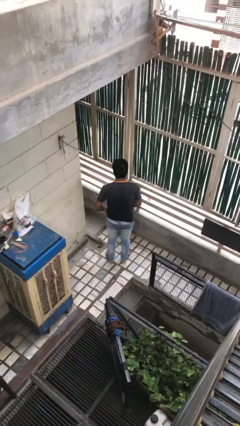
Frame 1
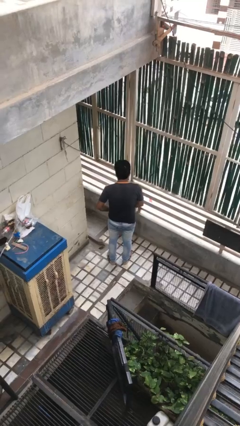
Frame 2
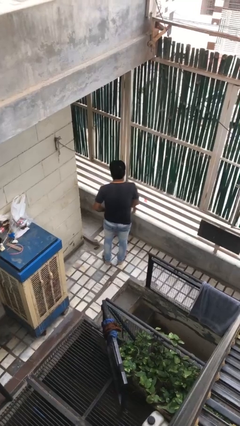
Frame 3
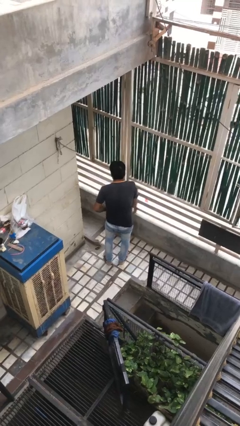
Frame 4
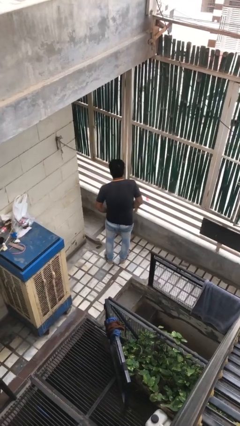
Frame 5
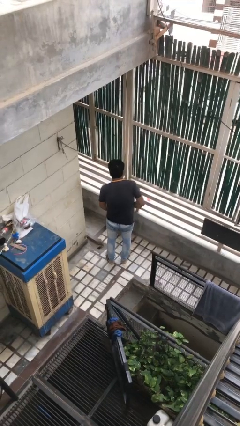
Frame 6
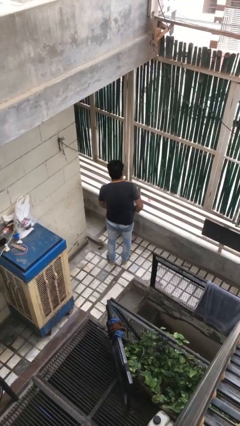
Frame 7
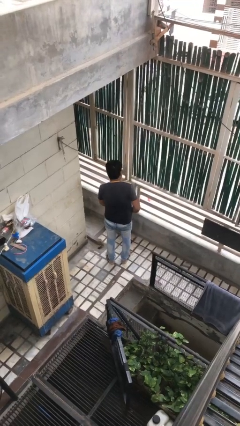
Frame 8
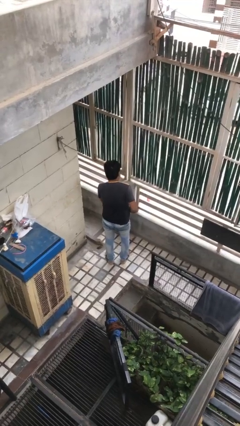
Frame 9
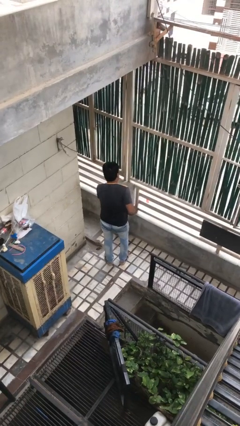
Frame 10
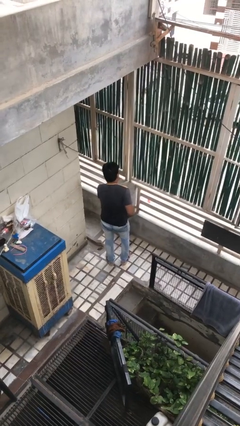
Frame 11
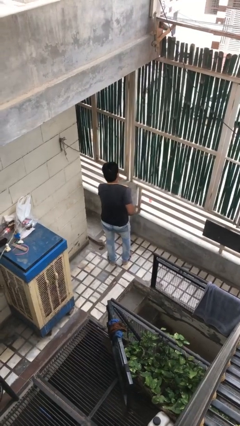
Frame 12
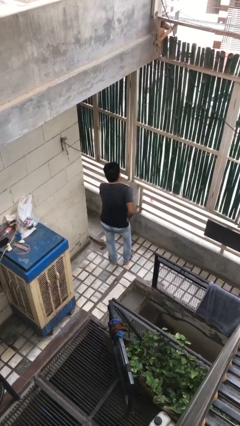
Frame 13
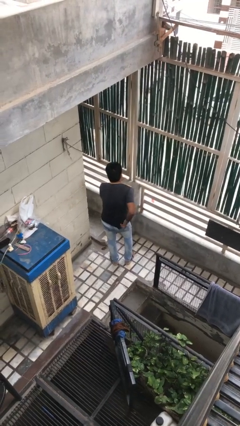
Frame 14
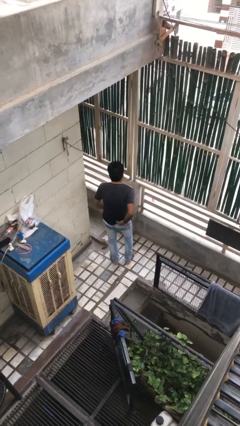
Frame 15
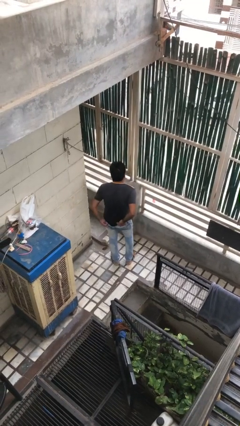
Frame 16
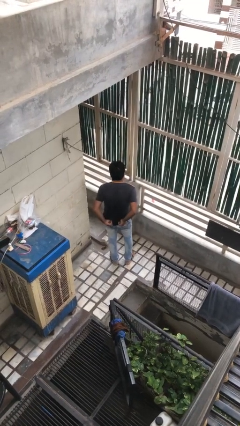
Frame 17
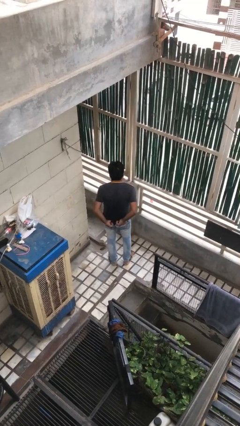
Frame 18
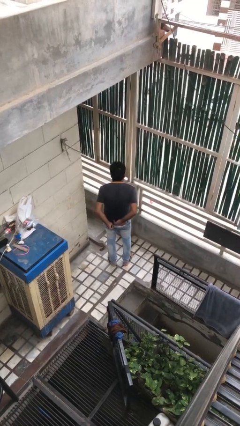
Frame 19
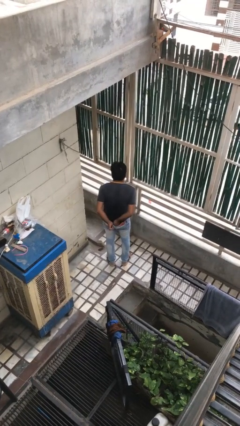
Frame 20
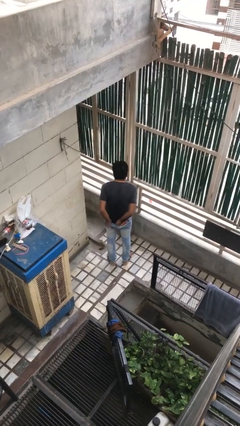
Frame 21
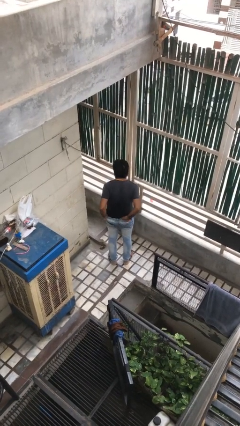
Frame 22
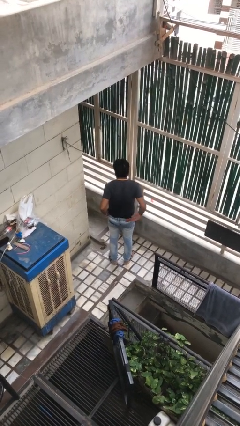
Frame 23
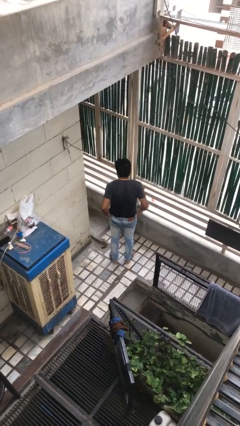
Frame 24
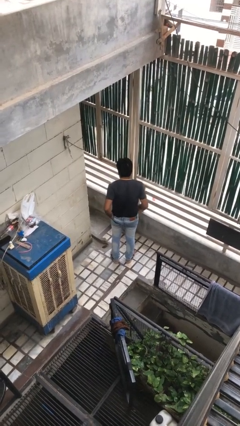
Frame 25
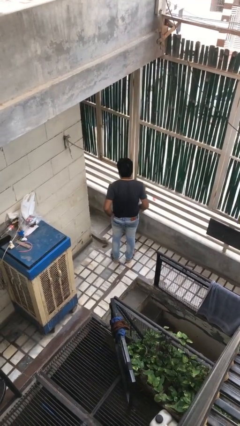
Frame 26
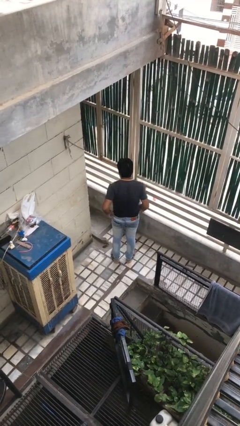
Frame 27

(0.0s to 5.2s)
person tucks in shirt

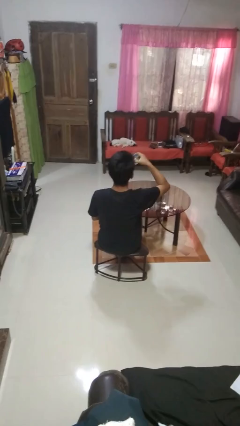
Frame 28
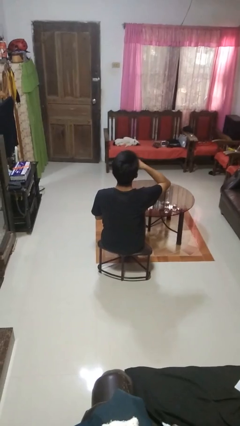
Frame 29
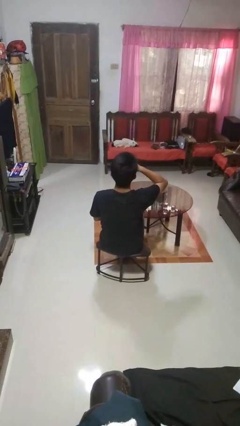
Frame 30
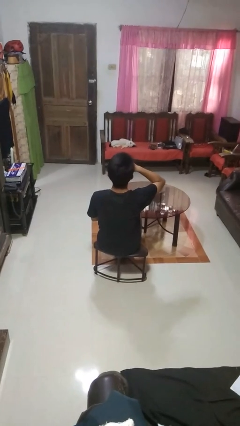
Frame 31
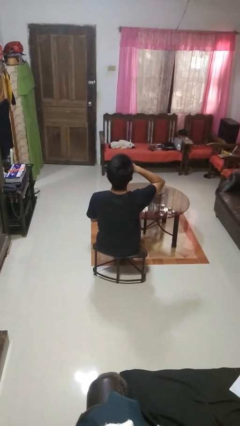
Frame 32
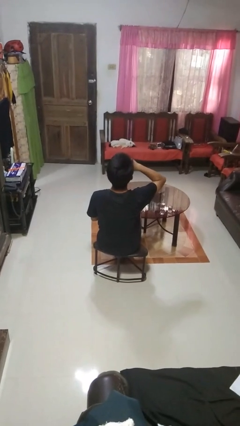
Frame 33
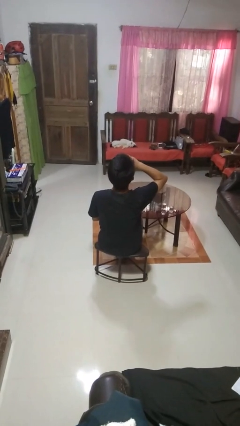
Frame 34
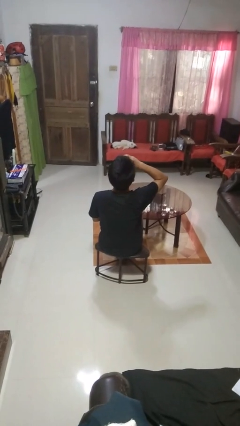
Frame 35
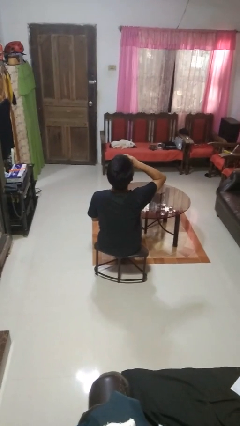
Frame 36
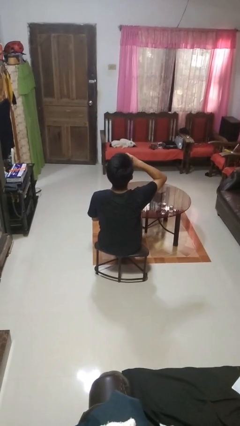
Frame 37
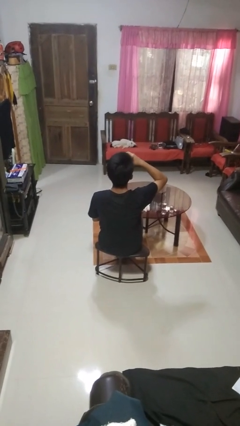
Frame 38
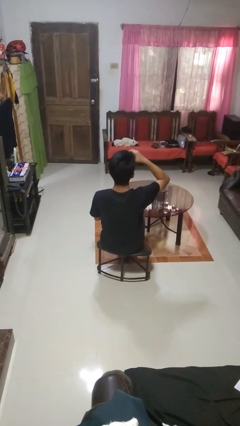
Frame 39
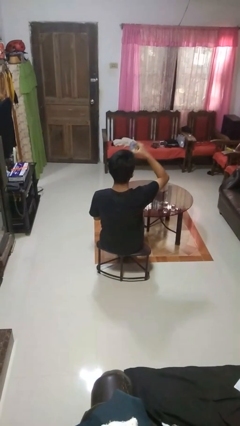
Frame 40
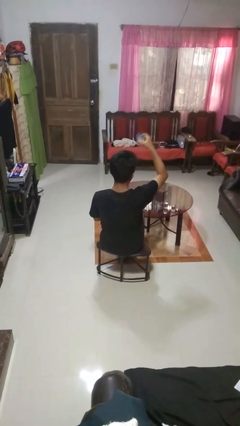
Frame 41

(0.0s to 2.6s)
person drinks from shotglass

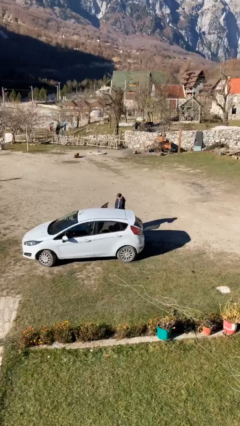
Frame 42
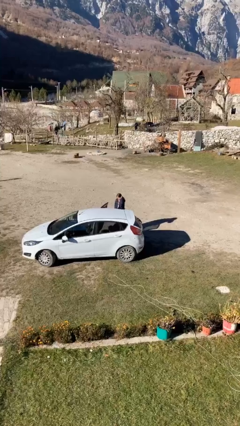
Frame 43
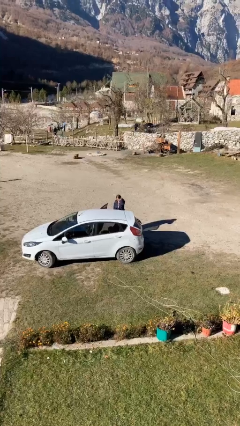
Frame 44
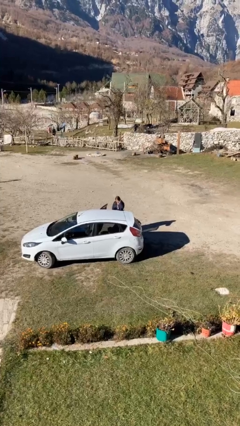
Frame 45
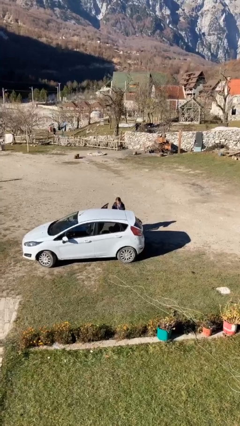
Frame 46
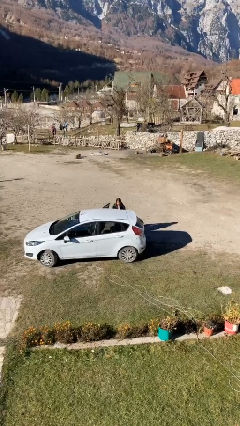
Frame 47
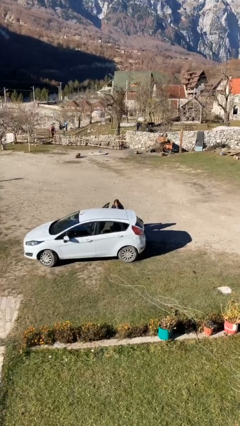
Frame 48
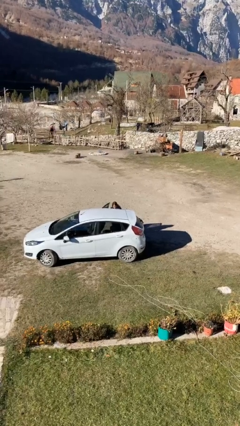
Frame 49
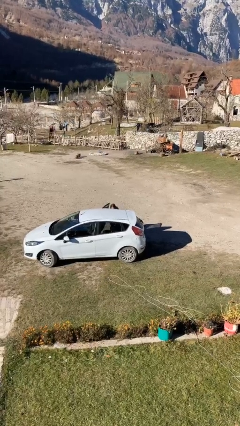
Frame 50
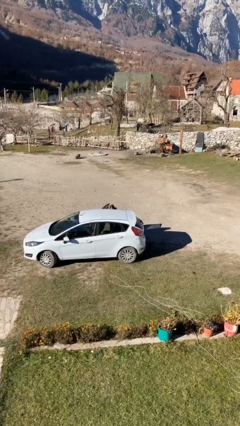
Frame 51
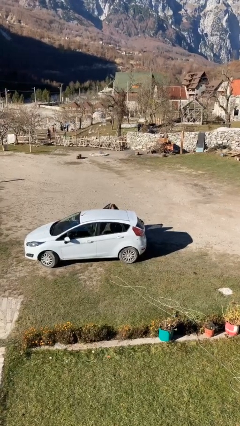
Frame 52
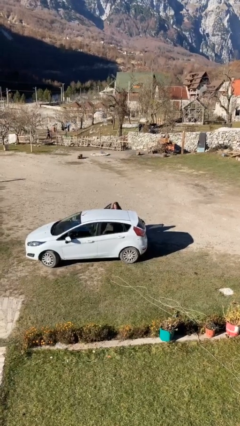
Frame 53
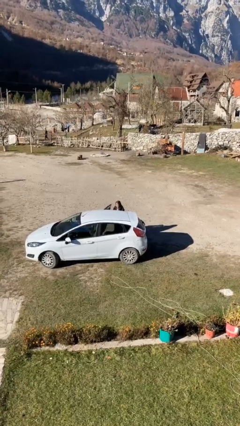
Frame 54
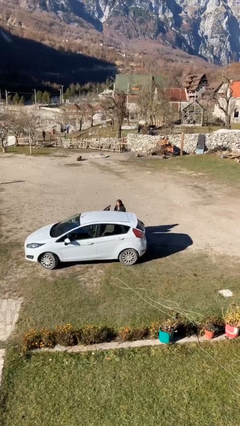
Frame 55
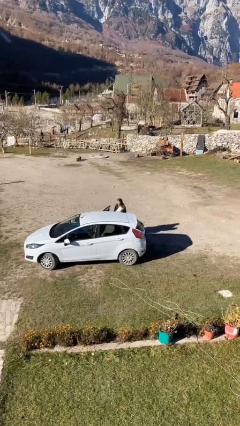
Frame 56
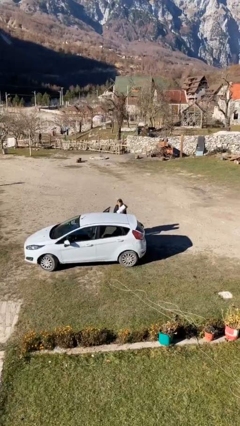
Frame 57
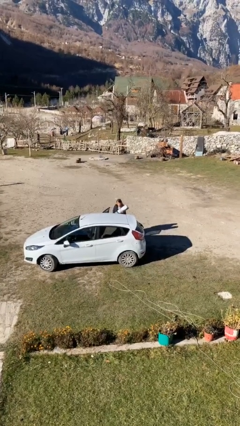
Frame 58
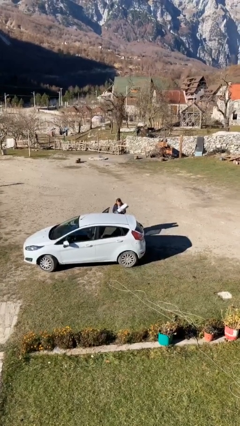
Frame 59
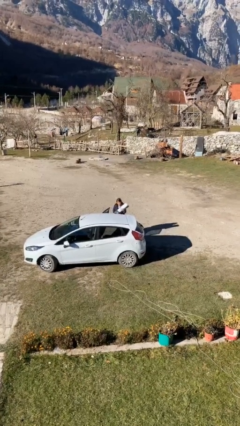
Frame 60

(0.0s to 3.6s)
person unloads car

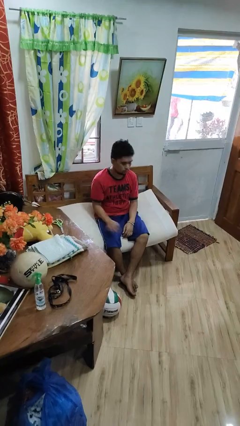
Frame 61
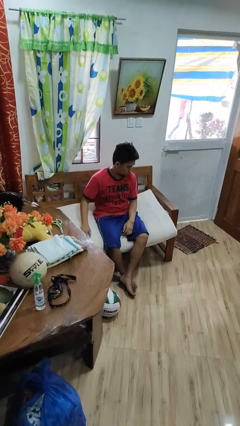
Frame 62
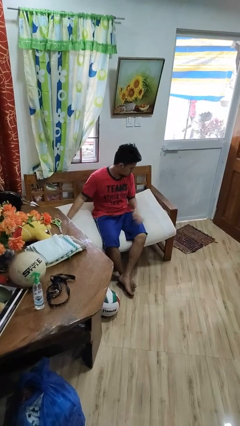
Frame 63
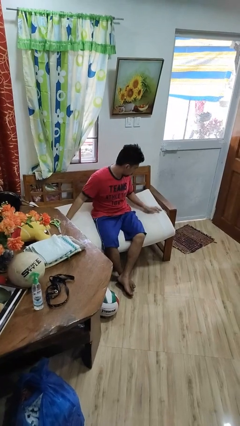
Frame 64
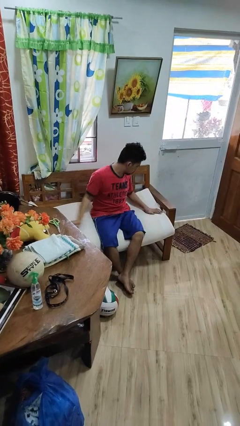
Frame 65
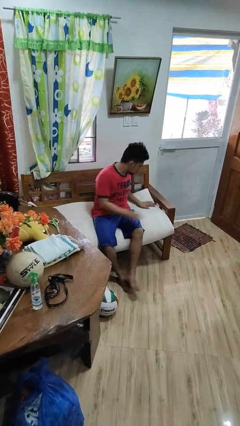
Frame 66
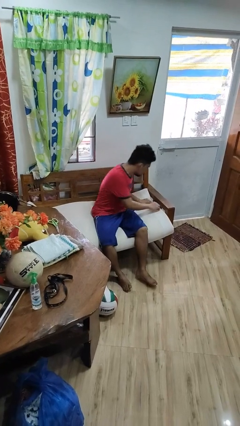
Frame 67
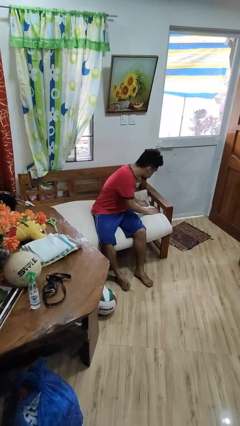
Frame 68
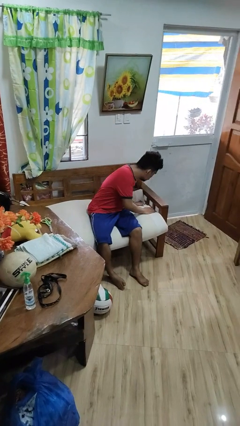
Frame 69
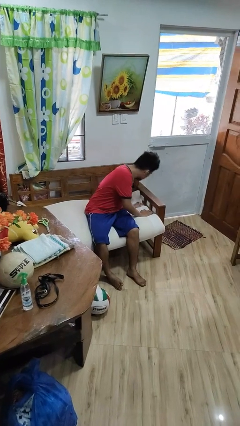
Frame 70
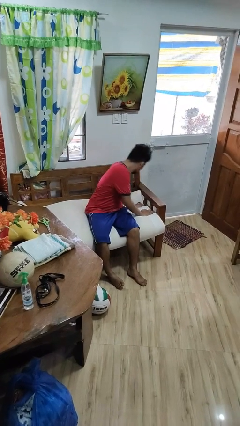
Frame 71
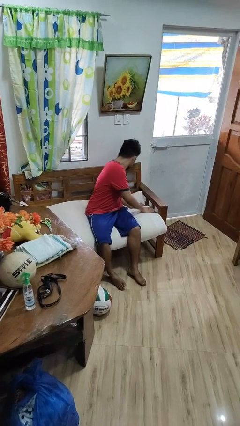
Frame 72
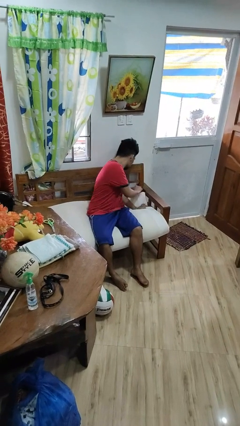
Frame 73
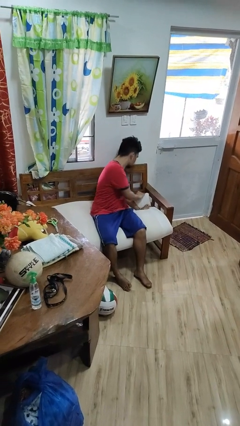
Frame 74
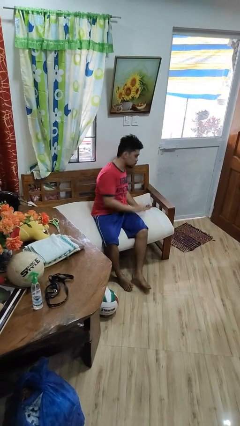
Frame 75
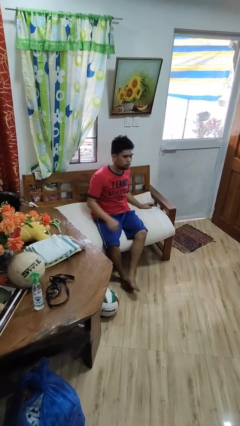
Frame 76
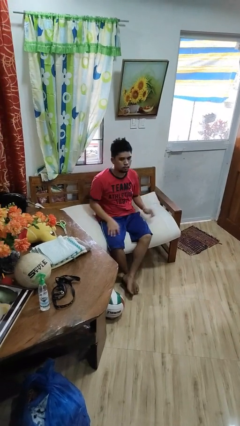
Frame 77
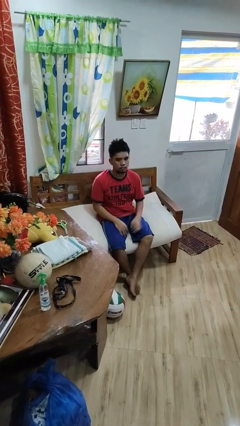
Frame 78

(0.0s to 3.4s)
person searches in couch

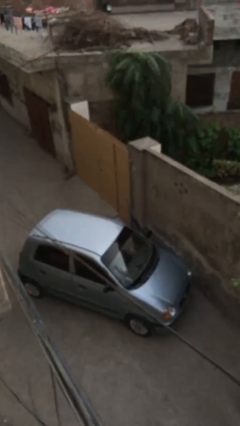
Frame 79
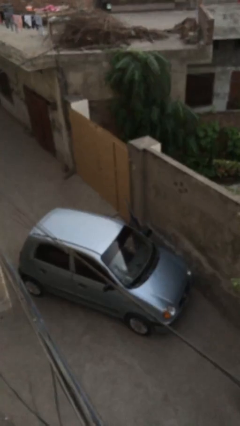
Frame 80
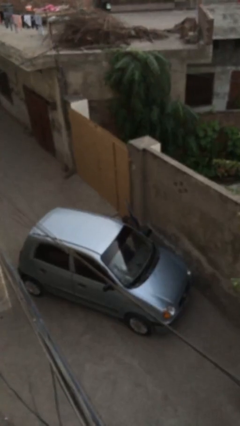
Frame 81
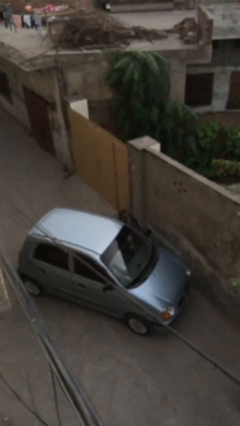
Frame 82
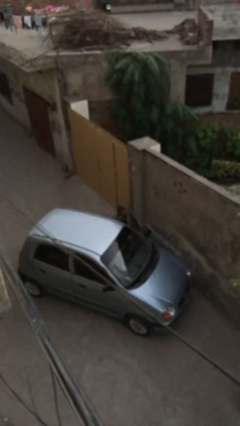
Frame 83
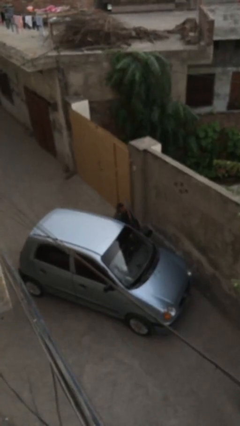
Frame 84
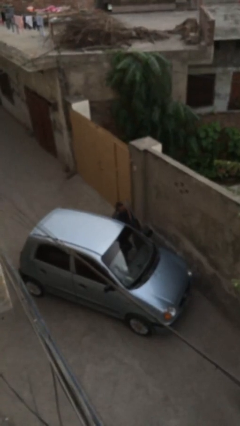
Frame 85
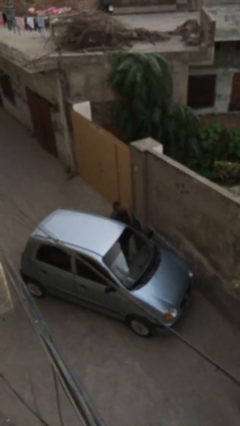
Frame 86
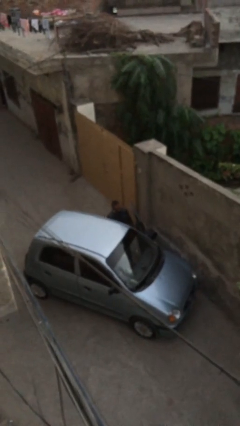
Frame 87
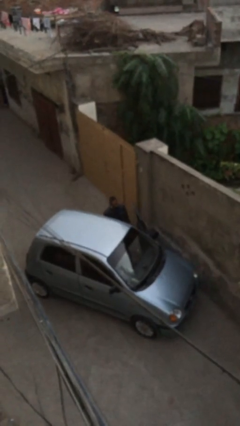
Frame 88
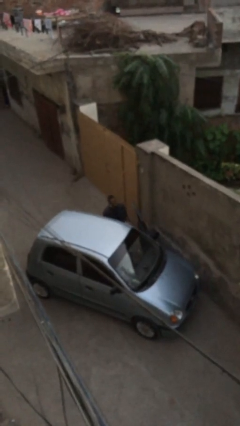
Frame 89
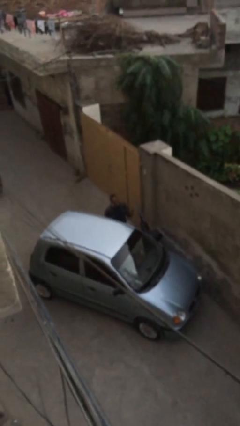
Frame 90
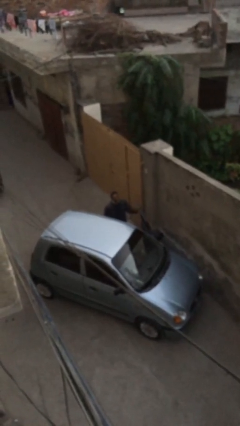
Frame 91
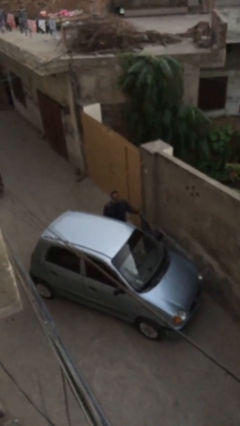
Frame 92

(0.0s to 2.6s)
person exits car

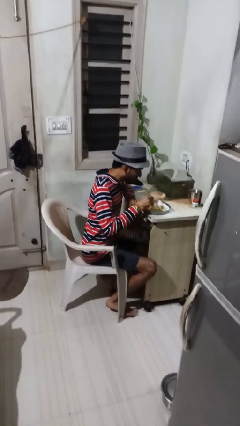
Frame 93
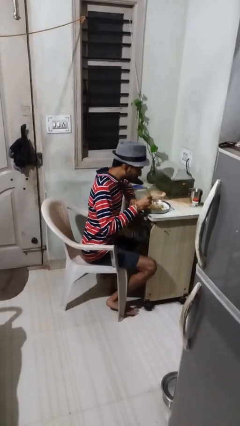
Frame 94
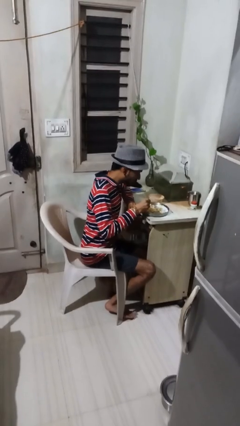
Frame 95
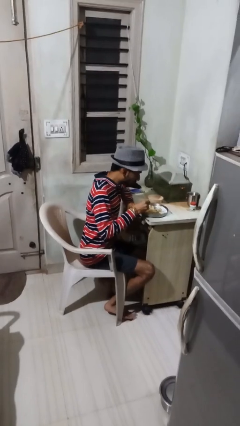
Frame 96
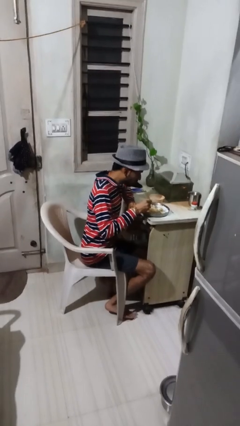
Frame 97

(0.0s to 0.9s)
person eats with utensil
